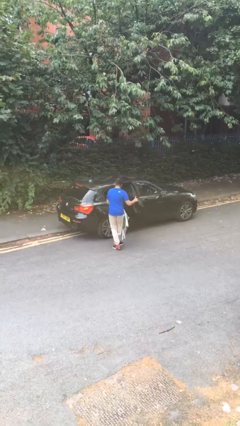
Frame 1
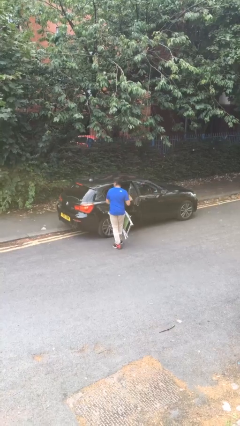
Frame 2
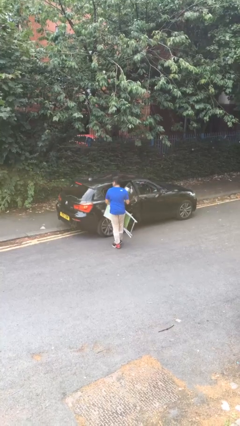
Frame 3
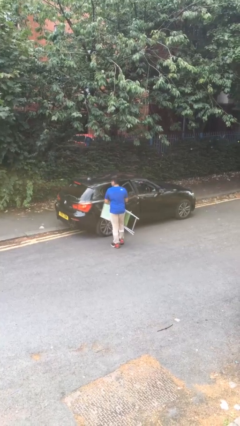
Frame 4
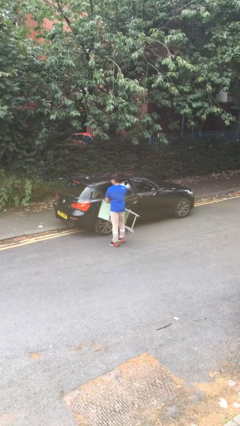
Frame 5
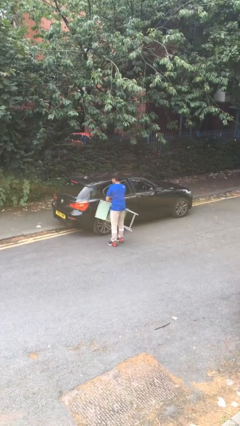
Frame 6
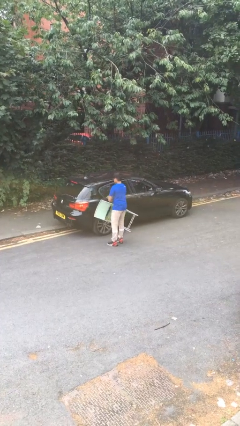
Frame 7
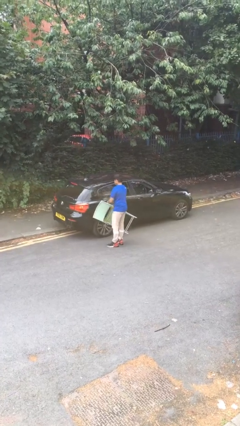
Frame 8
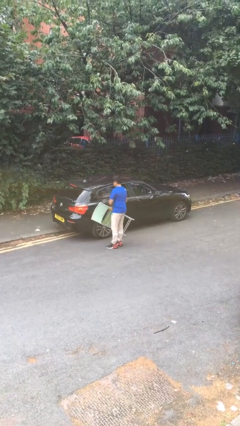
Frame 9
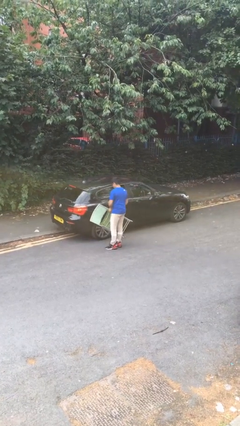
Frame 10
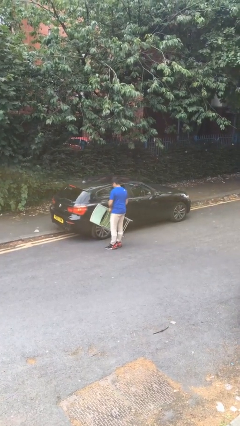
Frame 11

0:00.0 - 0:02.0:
person closes car door

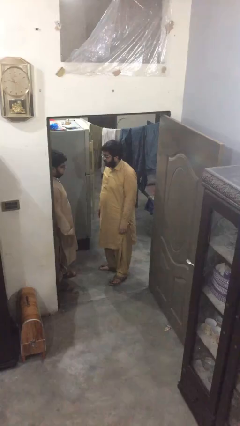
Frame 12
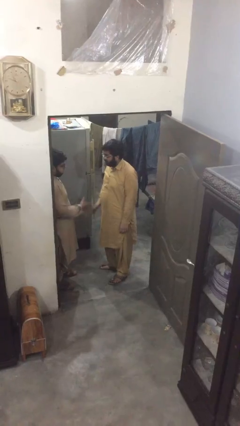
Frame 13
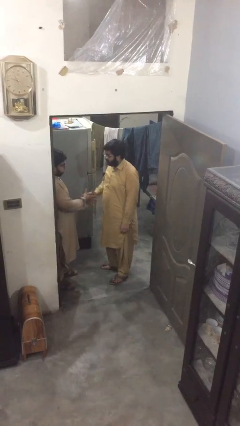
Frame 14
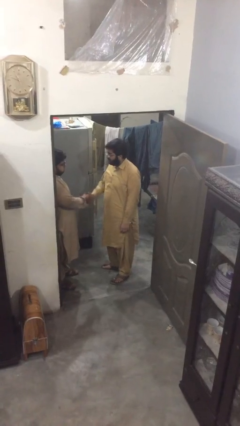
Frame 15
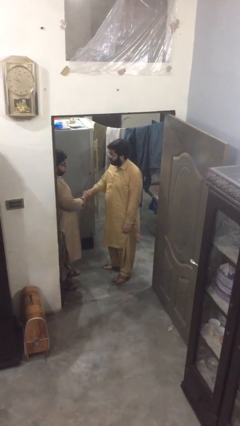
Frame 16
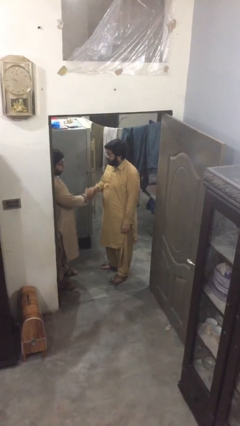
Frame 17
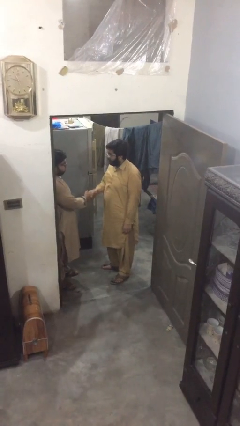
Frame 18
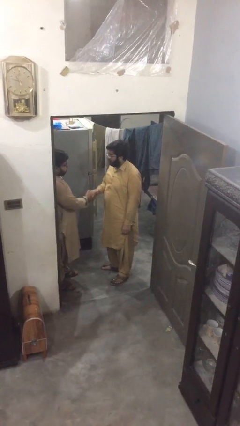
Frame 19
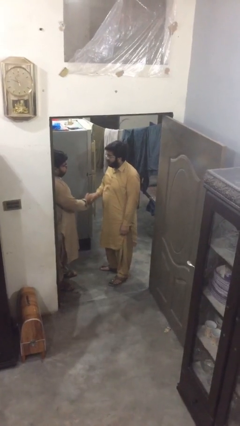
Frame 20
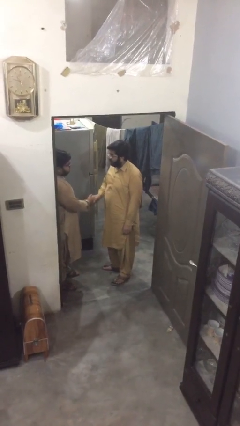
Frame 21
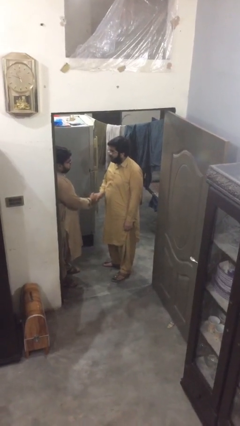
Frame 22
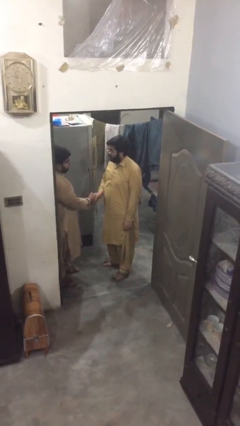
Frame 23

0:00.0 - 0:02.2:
person shakes hand

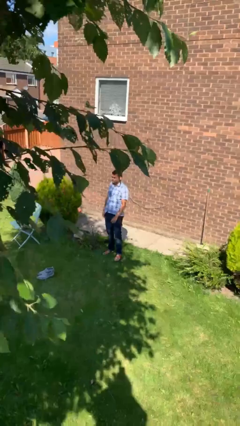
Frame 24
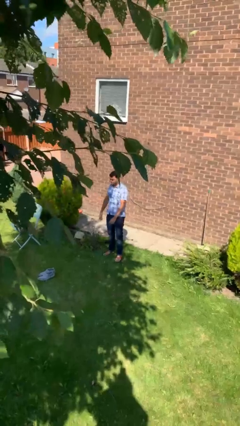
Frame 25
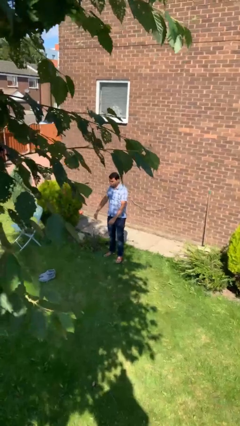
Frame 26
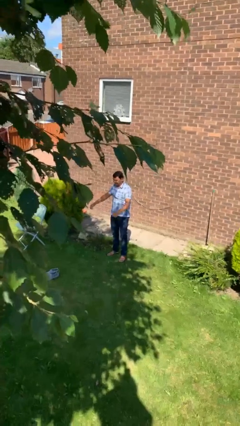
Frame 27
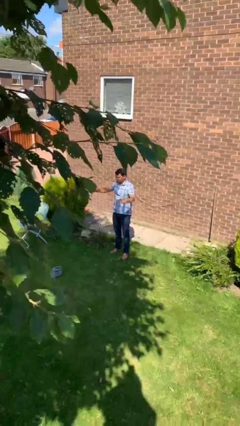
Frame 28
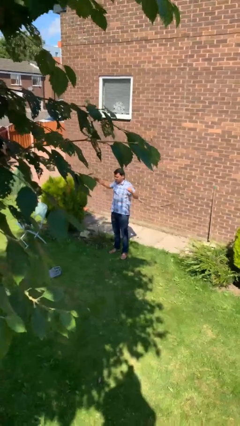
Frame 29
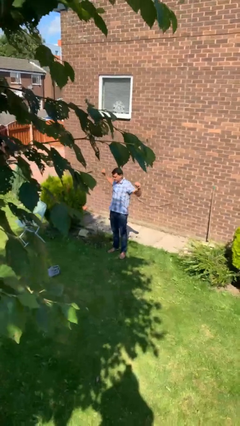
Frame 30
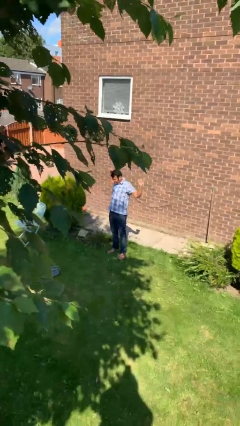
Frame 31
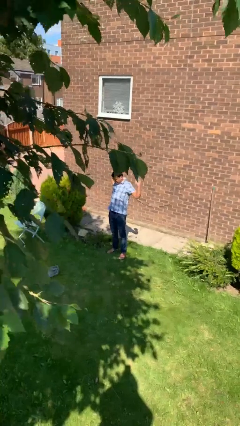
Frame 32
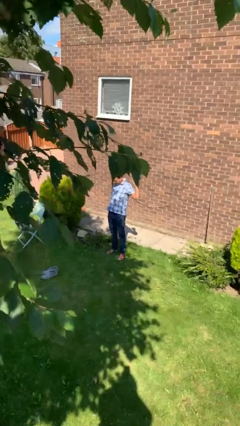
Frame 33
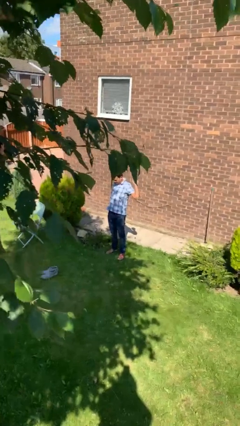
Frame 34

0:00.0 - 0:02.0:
person stretches arms to side

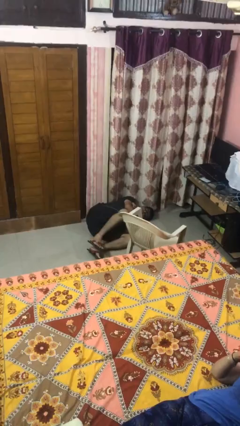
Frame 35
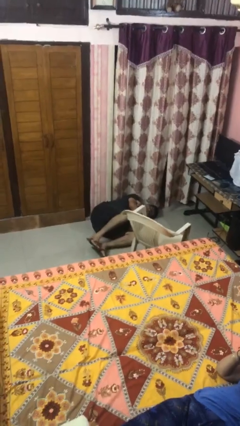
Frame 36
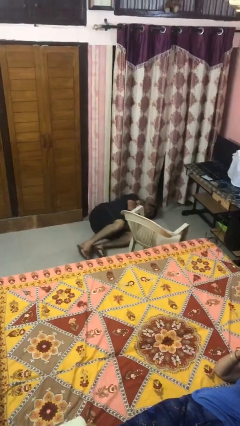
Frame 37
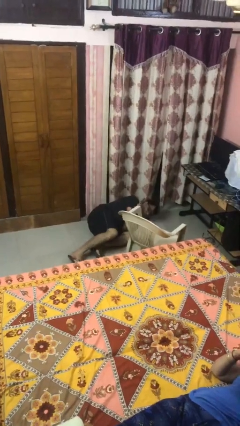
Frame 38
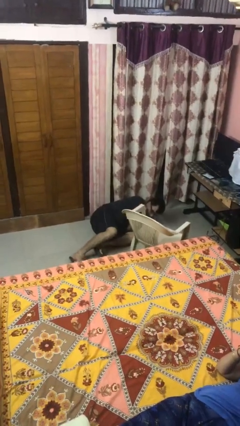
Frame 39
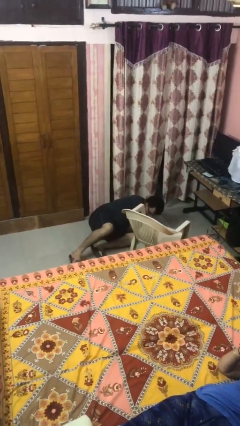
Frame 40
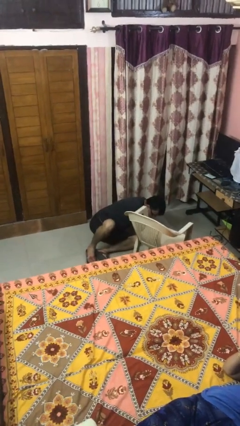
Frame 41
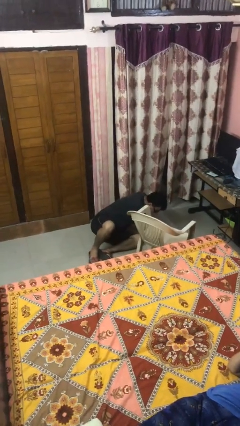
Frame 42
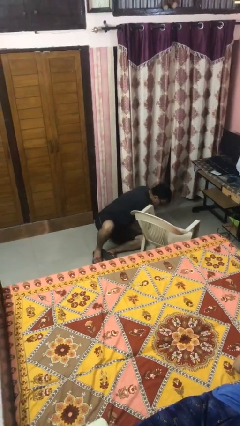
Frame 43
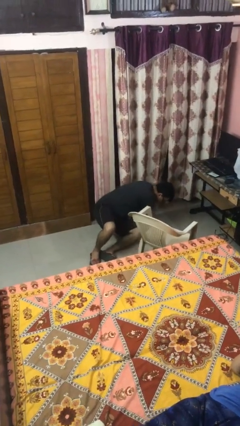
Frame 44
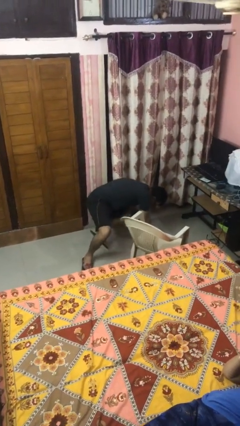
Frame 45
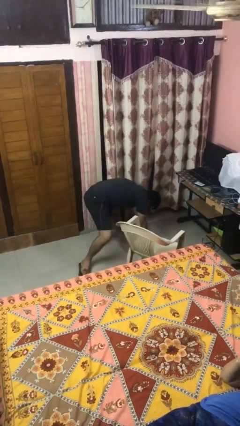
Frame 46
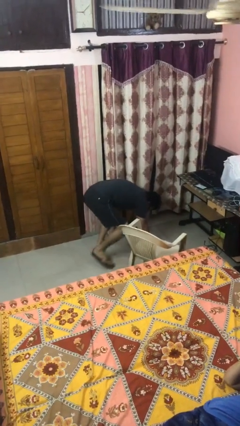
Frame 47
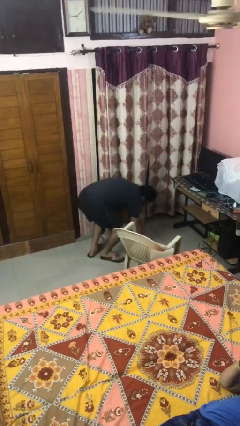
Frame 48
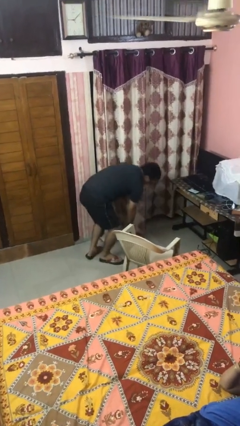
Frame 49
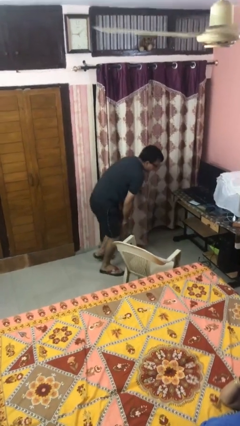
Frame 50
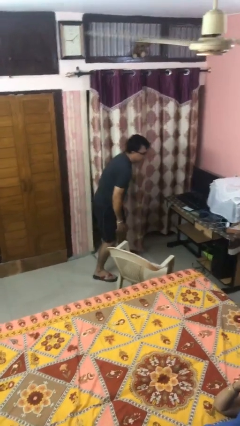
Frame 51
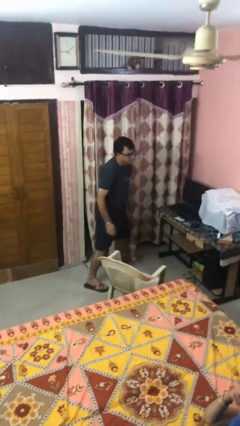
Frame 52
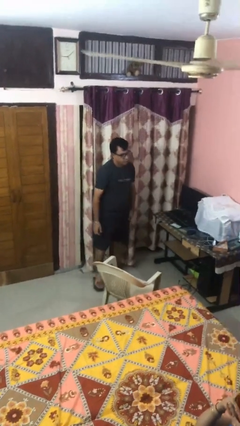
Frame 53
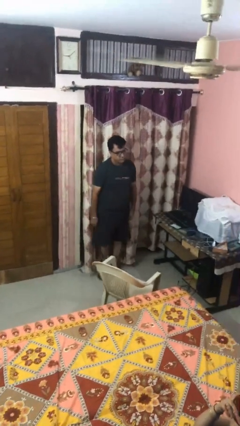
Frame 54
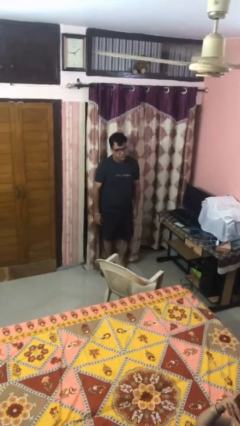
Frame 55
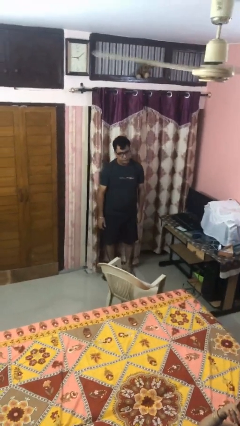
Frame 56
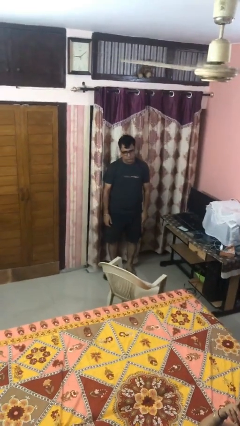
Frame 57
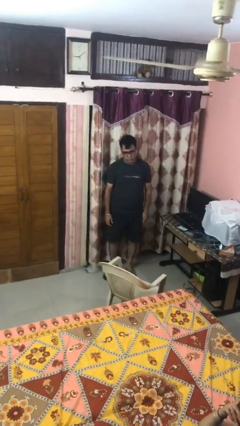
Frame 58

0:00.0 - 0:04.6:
person stands up from floor

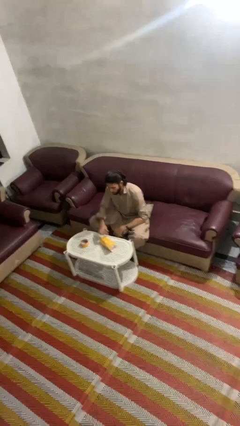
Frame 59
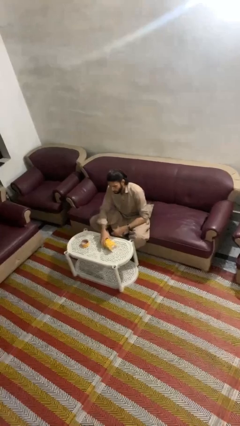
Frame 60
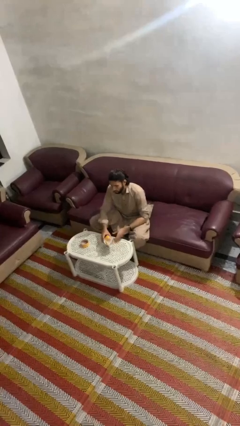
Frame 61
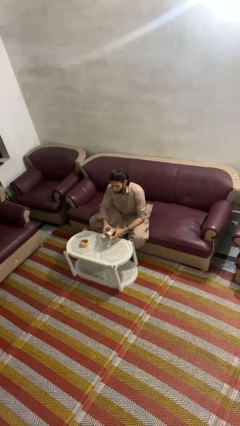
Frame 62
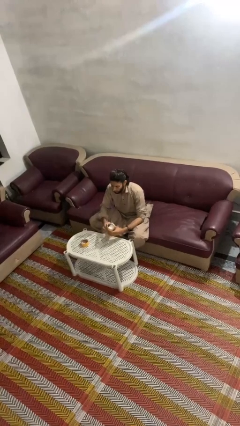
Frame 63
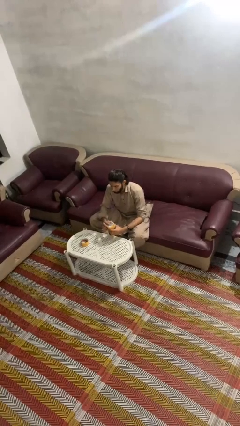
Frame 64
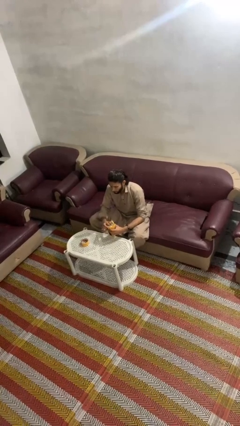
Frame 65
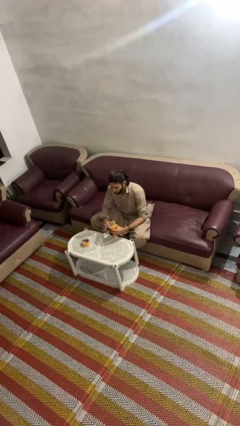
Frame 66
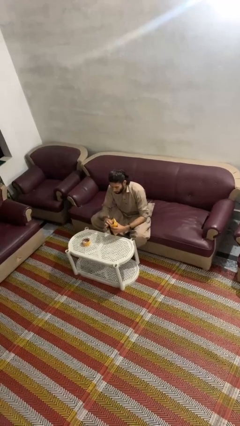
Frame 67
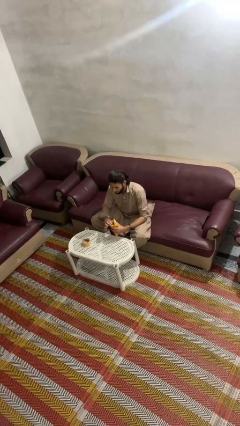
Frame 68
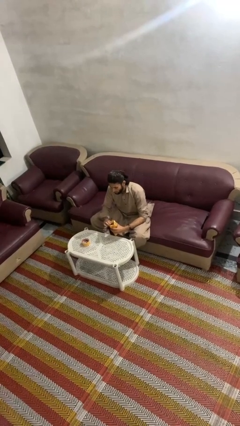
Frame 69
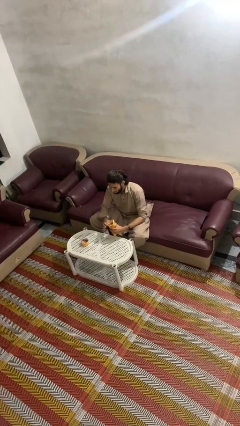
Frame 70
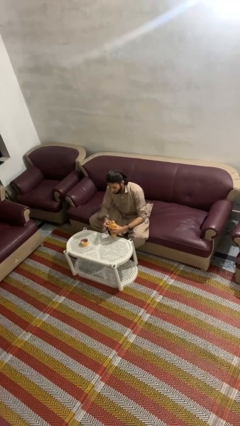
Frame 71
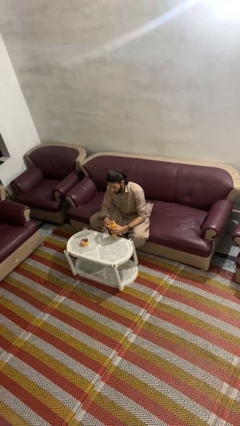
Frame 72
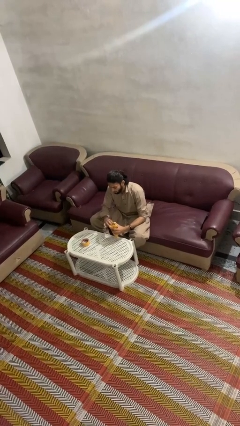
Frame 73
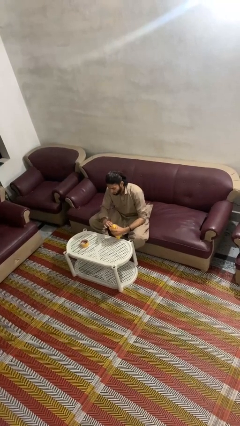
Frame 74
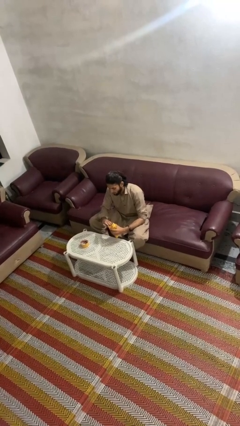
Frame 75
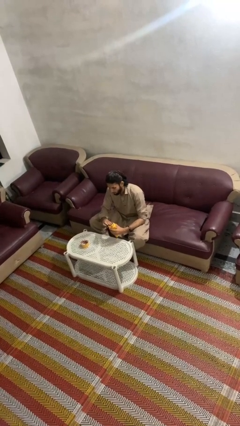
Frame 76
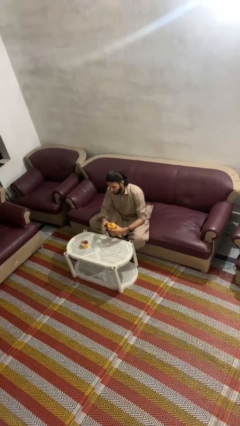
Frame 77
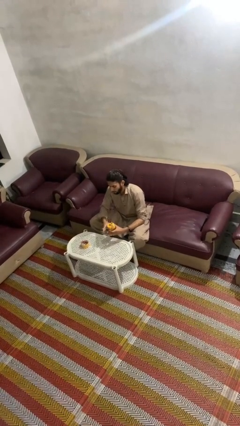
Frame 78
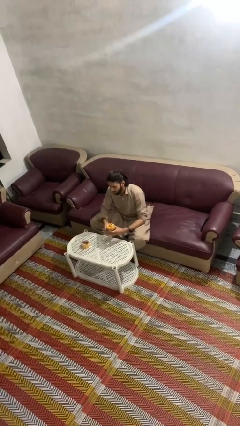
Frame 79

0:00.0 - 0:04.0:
person wraps box

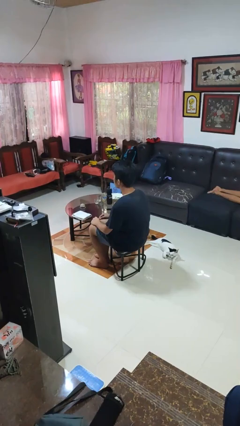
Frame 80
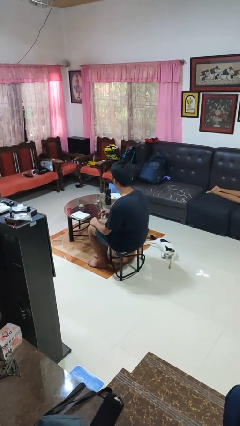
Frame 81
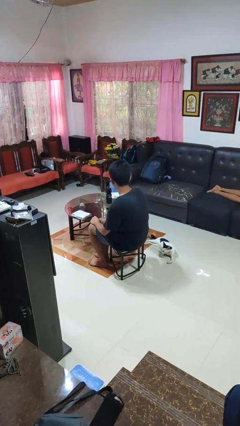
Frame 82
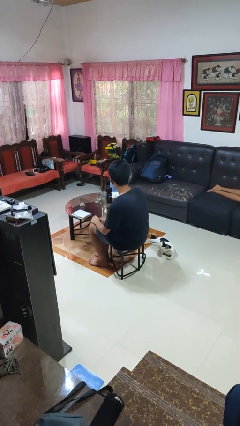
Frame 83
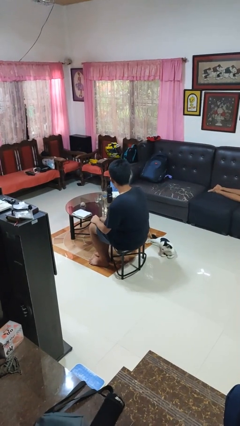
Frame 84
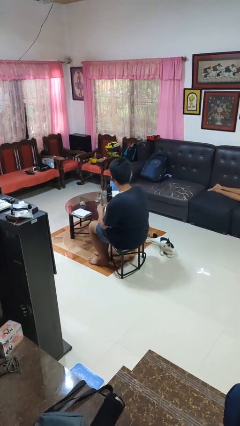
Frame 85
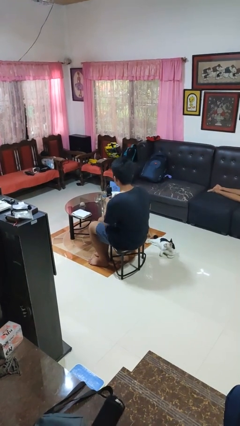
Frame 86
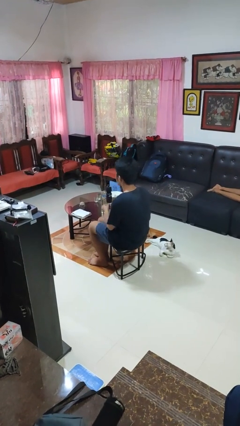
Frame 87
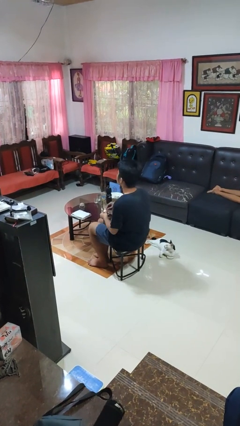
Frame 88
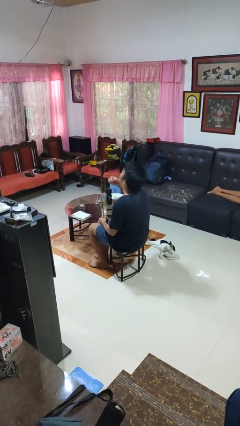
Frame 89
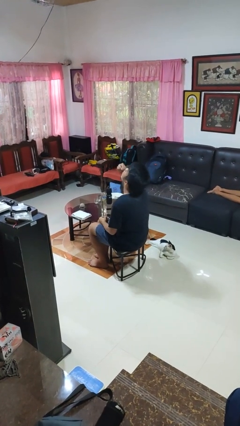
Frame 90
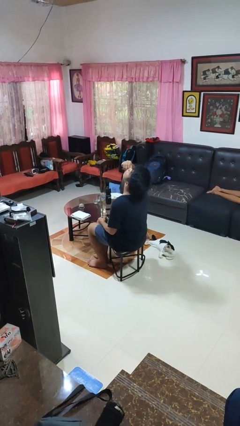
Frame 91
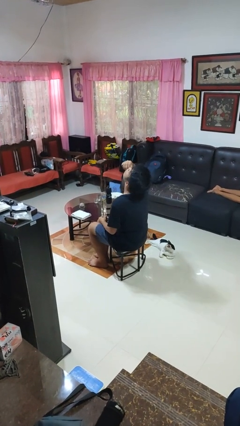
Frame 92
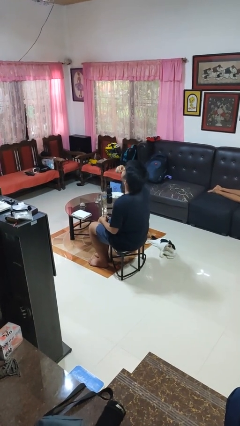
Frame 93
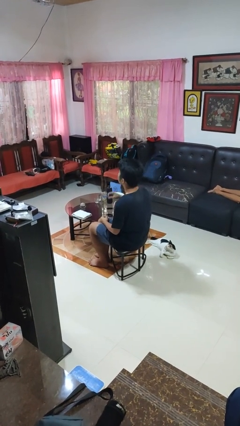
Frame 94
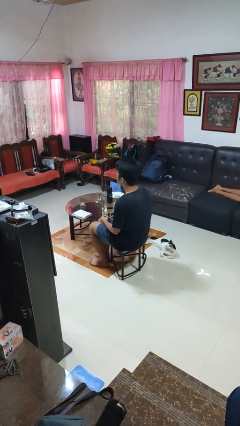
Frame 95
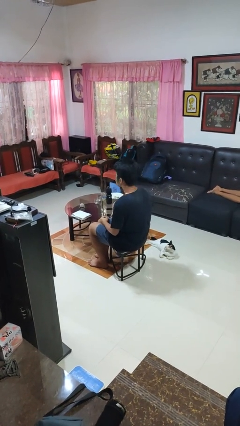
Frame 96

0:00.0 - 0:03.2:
person takes medicine pills
